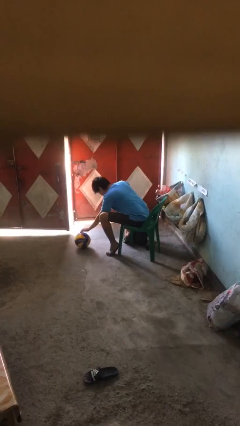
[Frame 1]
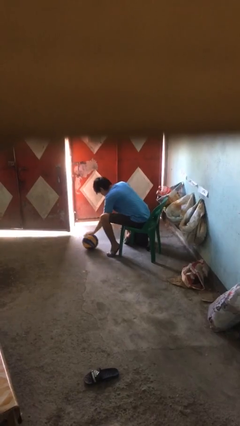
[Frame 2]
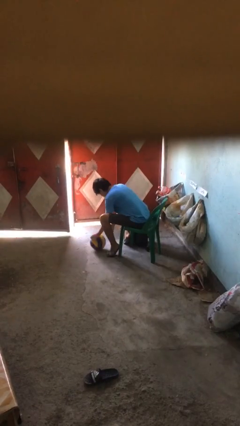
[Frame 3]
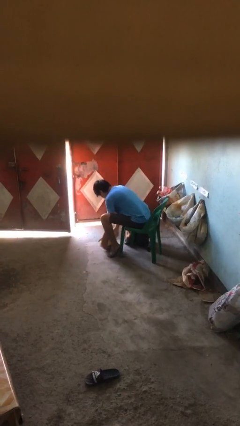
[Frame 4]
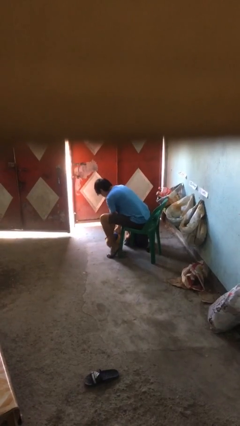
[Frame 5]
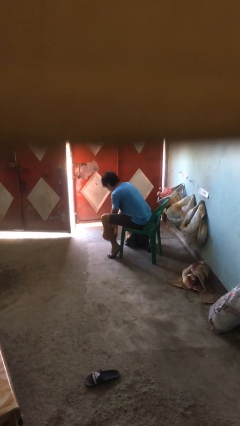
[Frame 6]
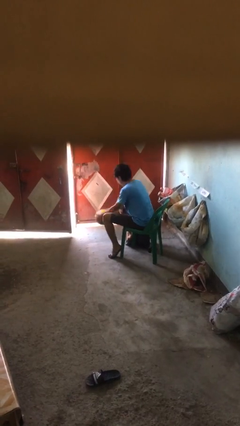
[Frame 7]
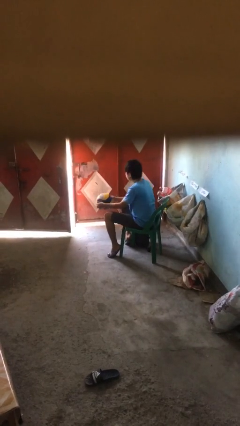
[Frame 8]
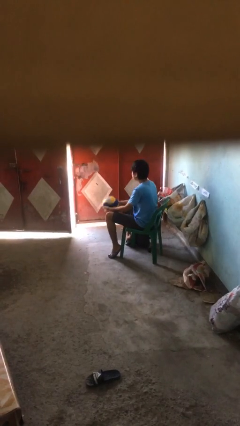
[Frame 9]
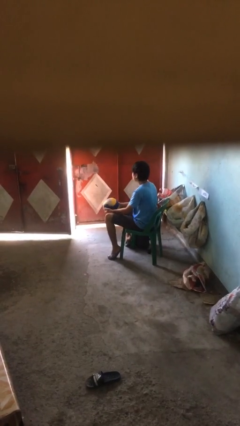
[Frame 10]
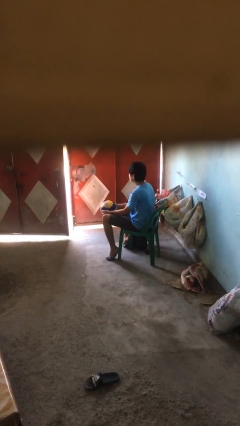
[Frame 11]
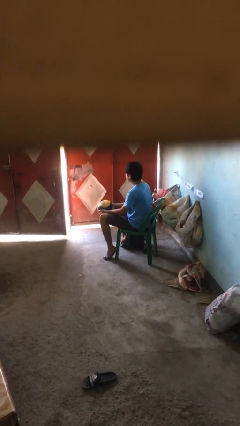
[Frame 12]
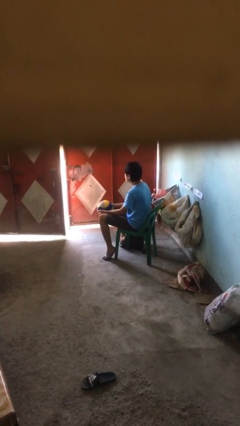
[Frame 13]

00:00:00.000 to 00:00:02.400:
person picks up object from floor

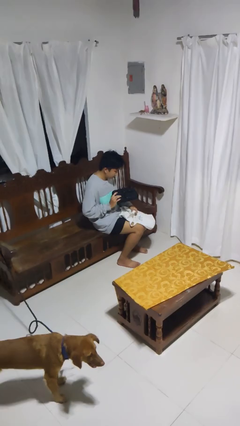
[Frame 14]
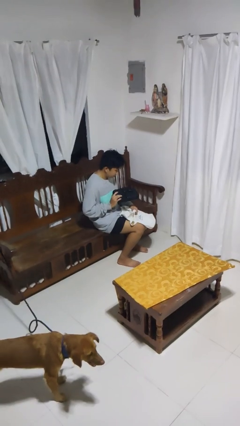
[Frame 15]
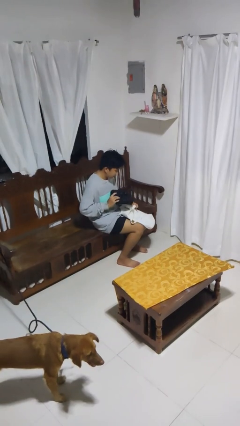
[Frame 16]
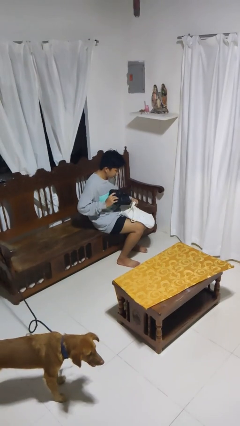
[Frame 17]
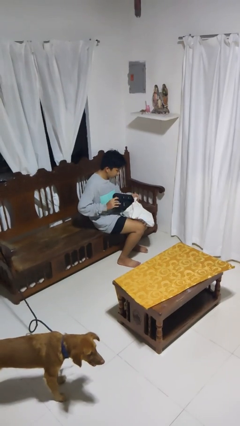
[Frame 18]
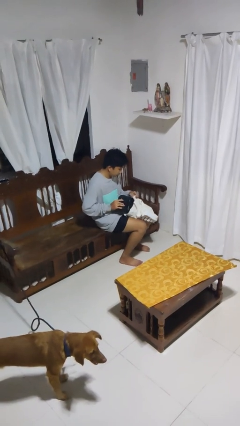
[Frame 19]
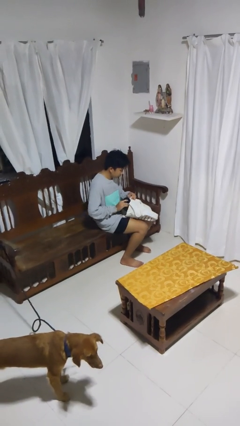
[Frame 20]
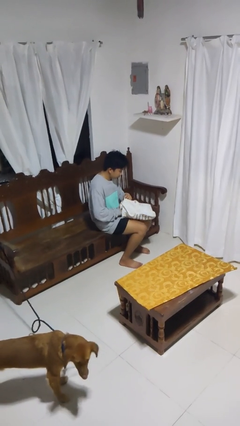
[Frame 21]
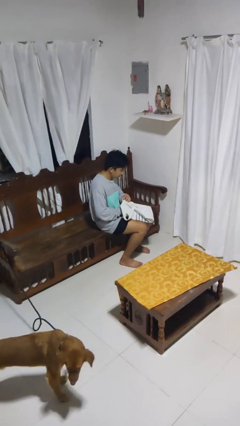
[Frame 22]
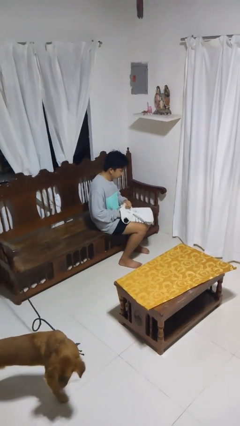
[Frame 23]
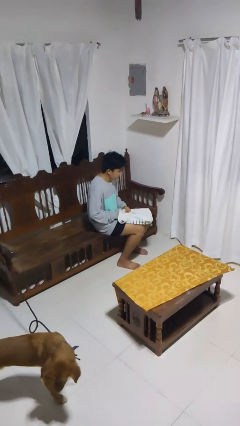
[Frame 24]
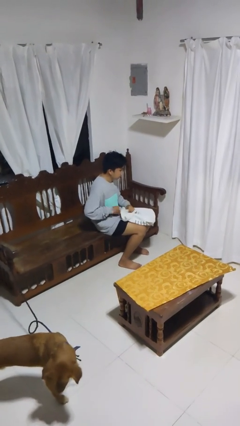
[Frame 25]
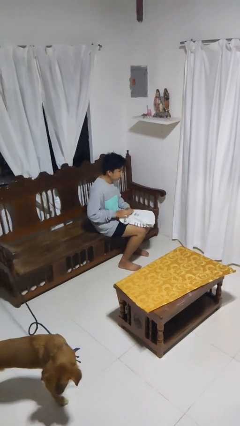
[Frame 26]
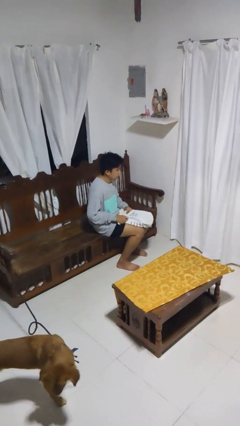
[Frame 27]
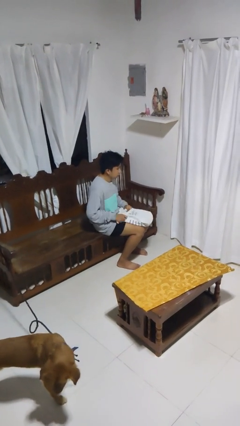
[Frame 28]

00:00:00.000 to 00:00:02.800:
person puts object into bag

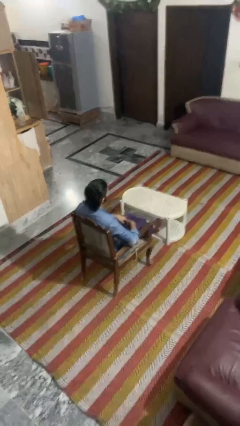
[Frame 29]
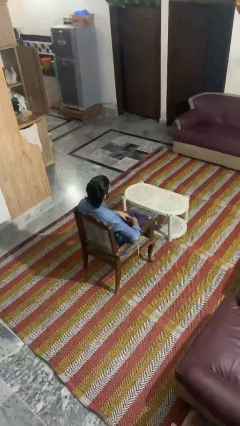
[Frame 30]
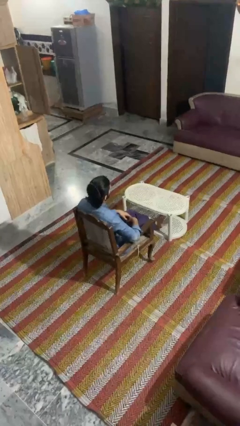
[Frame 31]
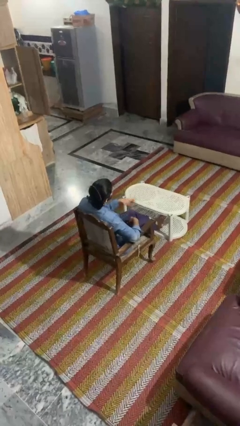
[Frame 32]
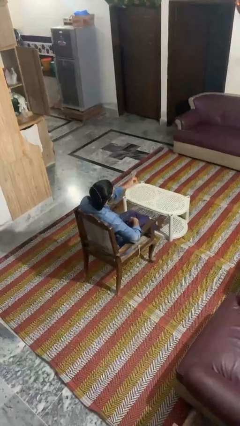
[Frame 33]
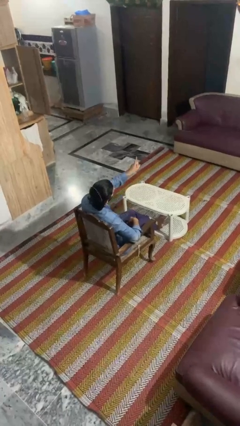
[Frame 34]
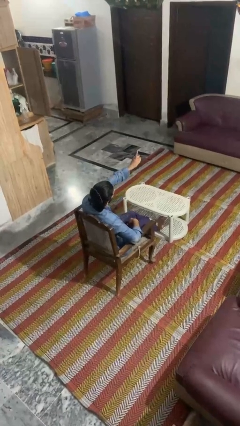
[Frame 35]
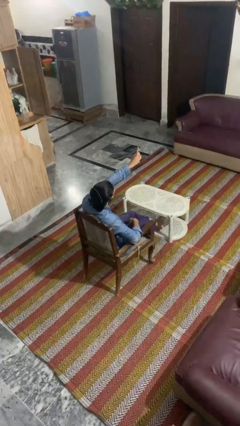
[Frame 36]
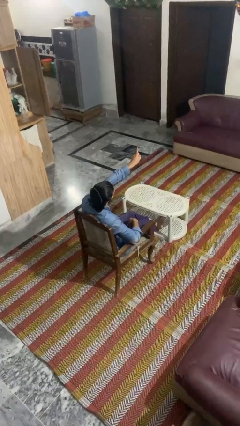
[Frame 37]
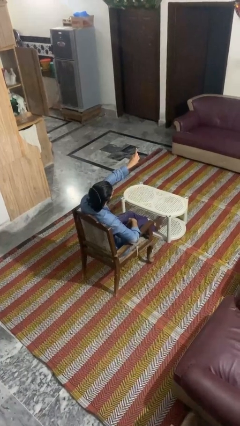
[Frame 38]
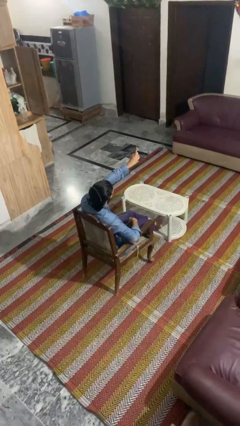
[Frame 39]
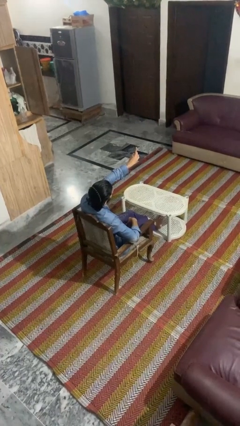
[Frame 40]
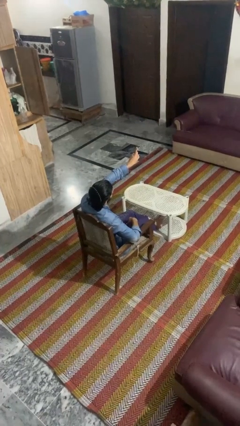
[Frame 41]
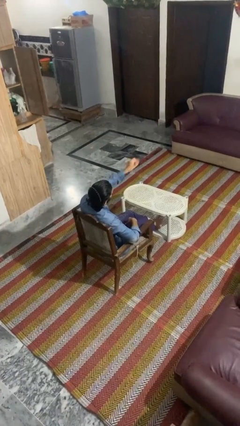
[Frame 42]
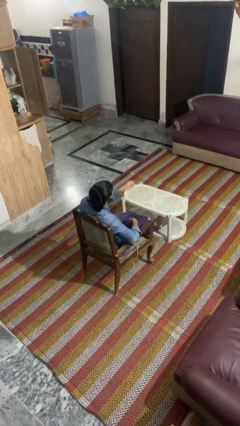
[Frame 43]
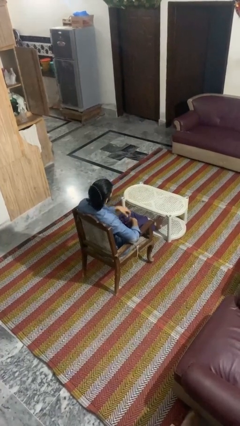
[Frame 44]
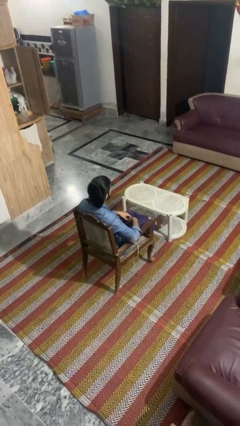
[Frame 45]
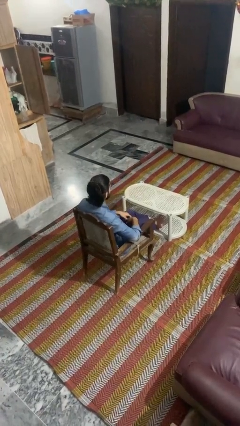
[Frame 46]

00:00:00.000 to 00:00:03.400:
person gestures number one

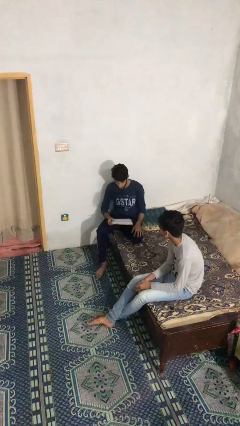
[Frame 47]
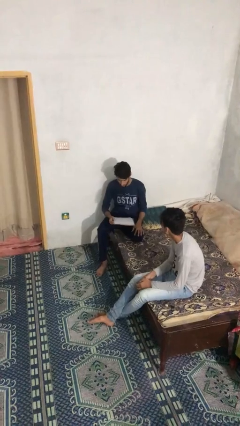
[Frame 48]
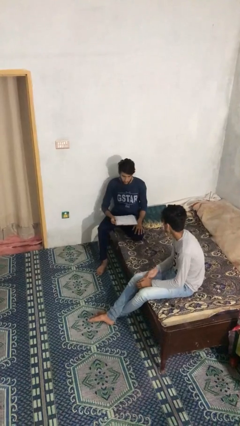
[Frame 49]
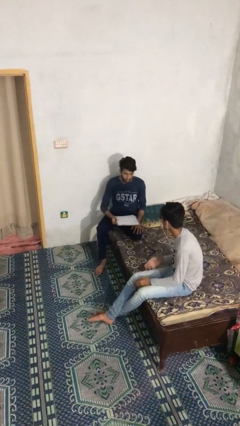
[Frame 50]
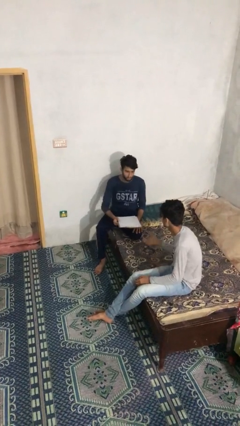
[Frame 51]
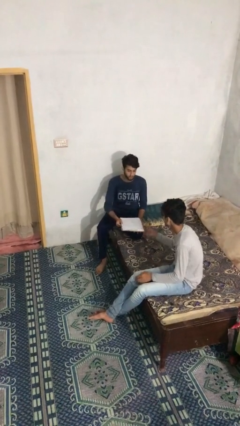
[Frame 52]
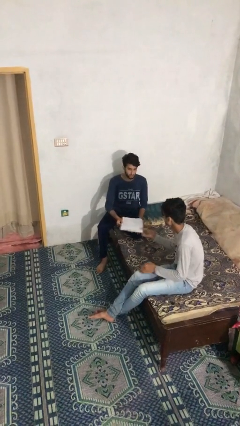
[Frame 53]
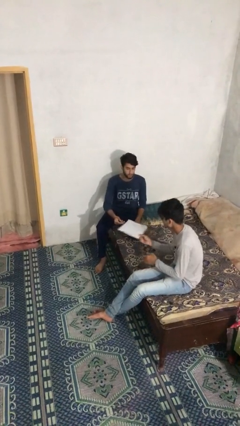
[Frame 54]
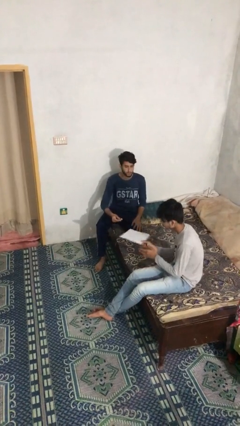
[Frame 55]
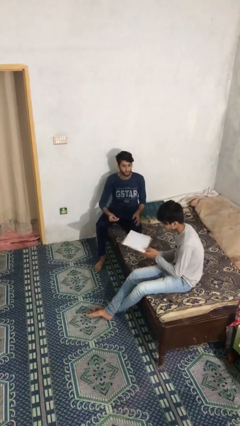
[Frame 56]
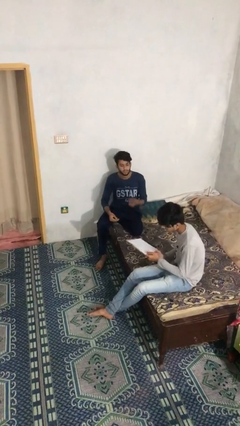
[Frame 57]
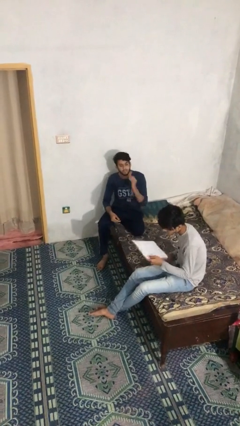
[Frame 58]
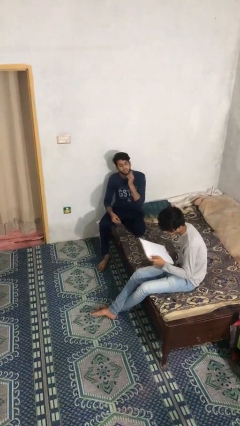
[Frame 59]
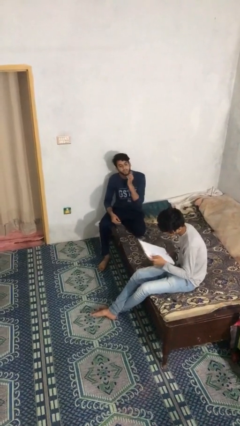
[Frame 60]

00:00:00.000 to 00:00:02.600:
person transfers object to person

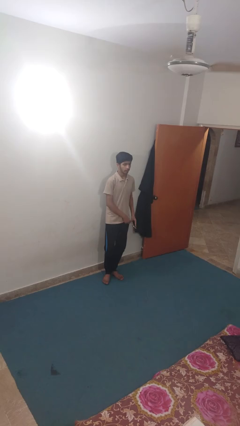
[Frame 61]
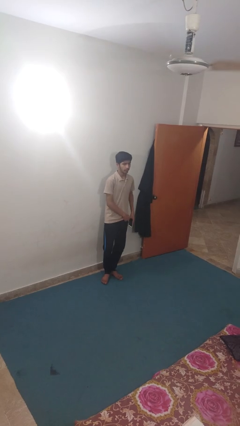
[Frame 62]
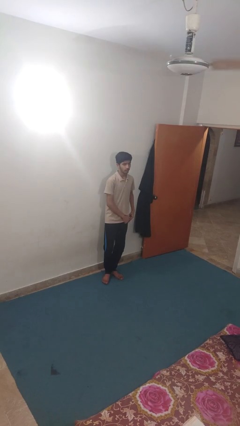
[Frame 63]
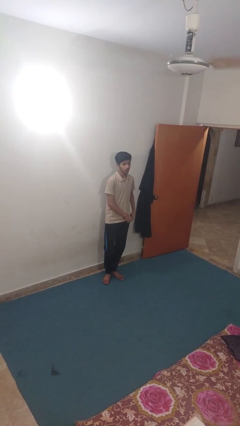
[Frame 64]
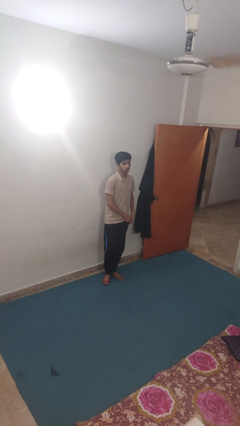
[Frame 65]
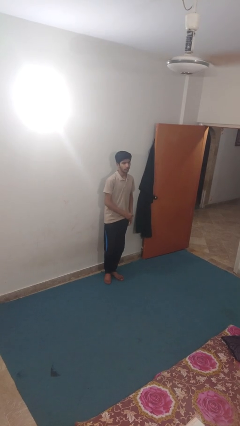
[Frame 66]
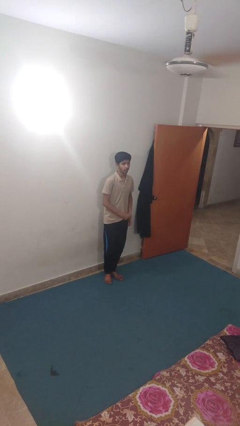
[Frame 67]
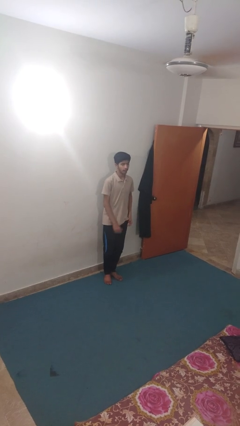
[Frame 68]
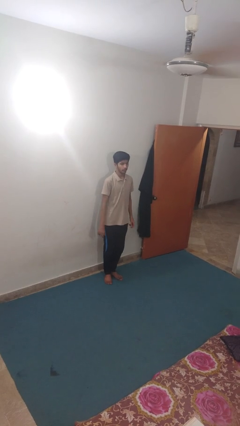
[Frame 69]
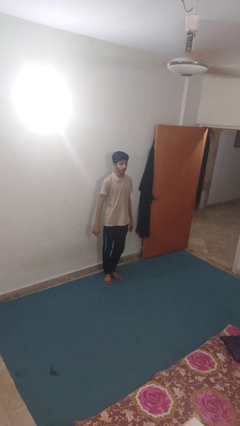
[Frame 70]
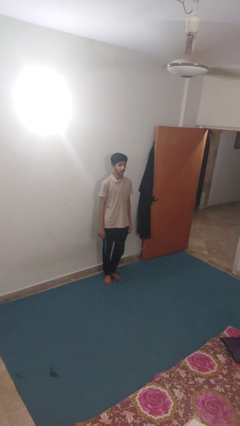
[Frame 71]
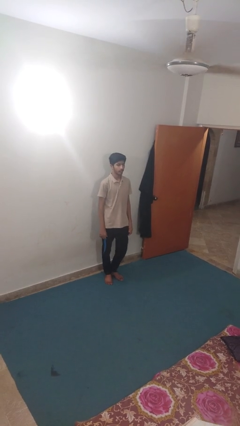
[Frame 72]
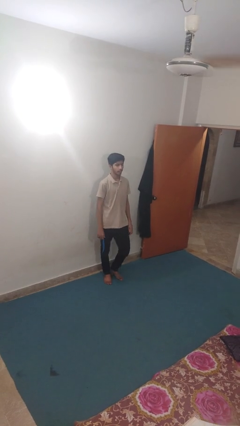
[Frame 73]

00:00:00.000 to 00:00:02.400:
person puts phone into pocket

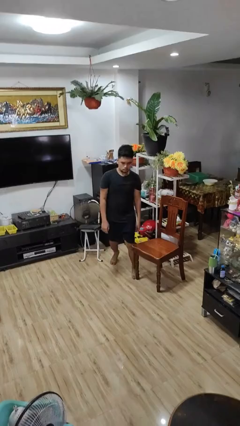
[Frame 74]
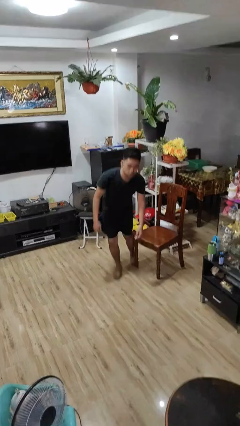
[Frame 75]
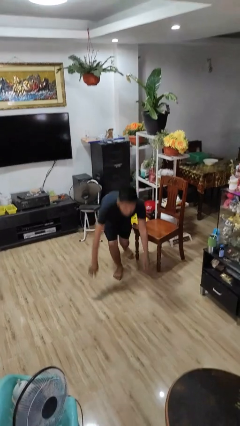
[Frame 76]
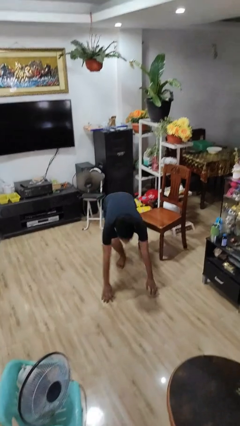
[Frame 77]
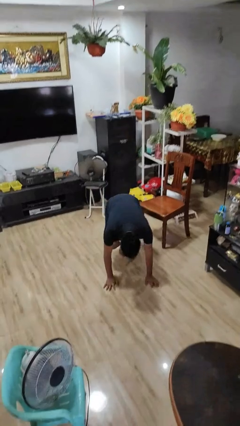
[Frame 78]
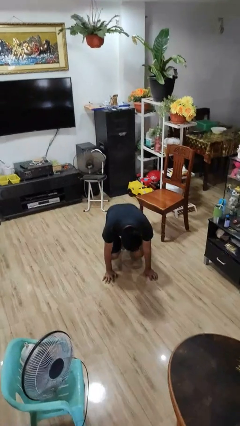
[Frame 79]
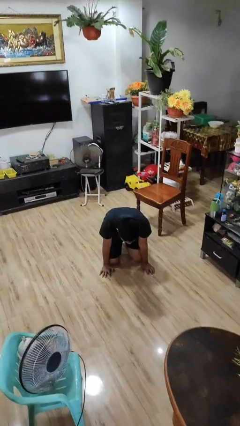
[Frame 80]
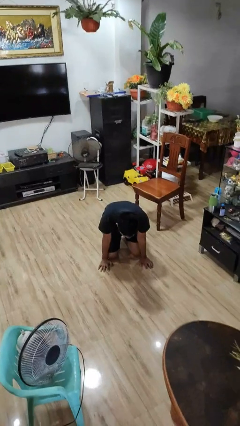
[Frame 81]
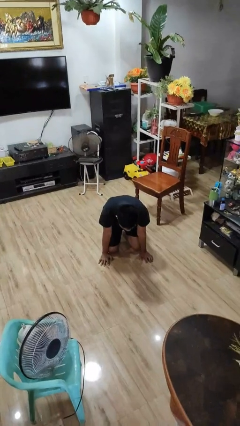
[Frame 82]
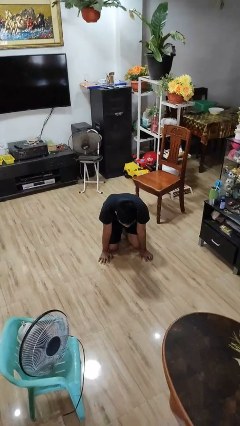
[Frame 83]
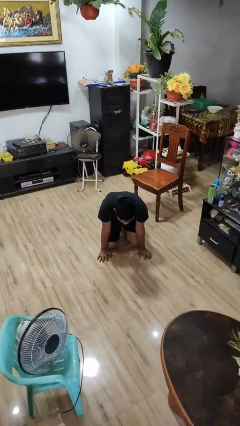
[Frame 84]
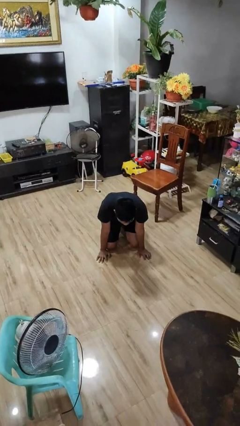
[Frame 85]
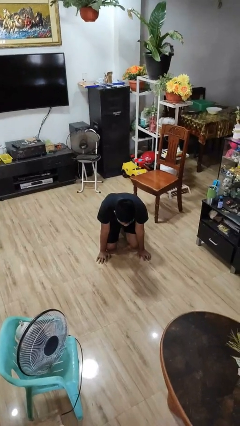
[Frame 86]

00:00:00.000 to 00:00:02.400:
person trips on object on floor

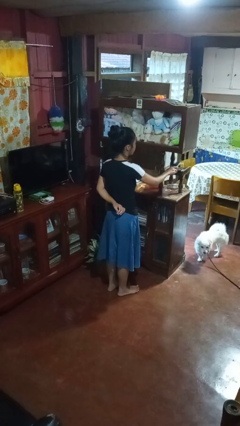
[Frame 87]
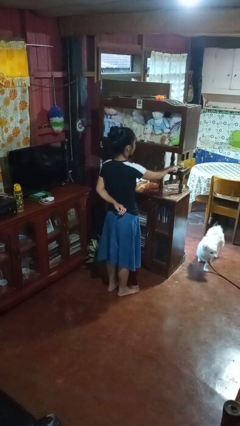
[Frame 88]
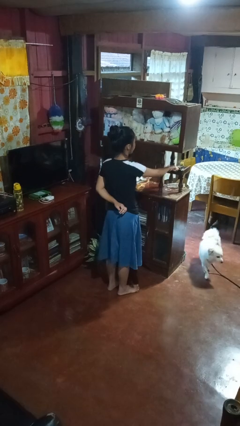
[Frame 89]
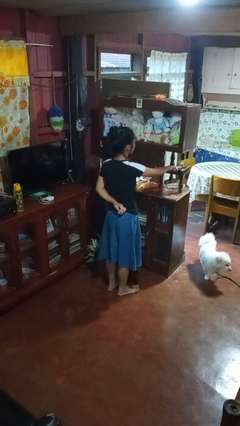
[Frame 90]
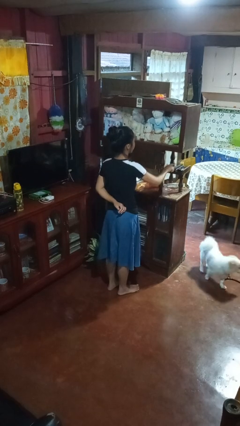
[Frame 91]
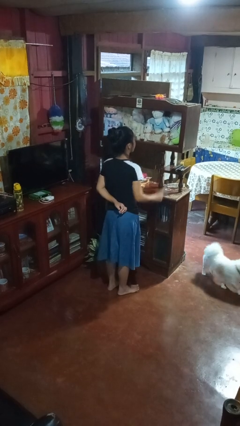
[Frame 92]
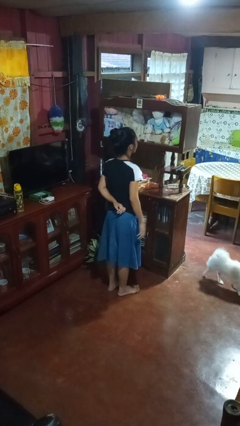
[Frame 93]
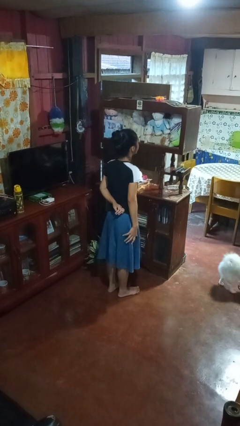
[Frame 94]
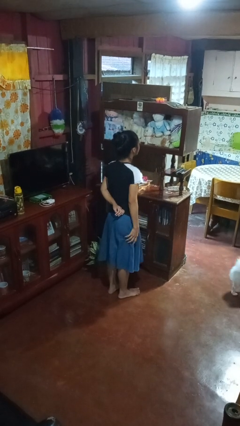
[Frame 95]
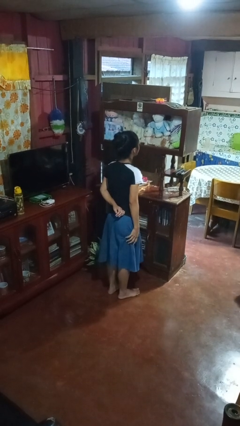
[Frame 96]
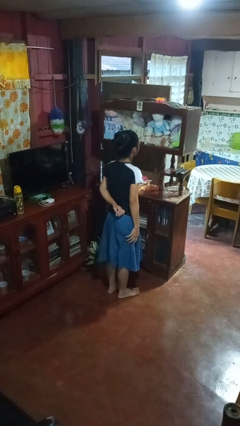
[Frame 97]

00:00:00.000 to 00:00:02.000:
person puts down object on shelf
